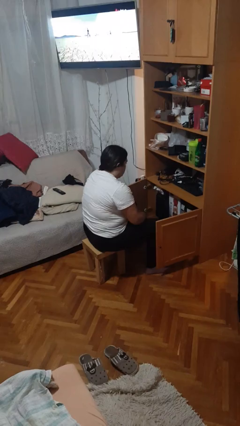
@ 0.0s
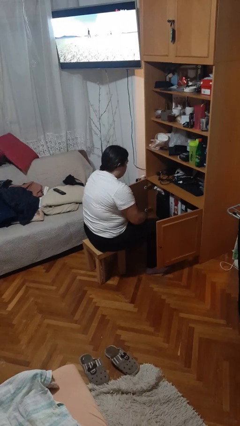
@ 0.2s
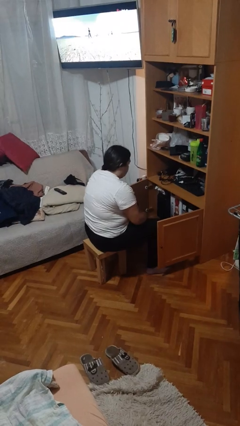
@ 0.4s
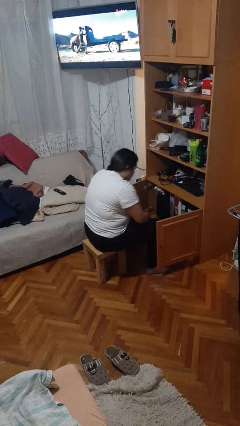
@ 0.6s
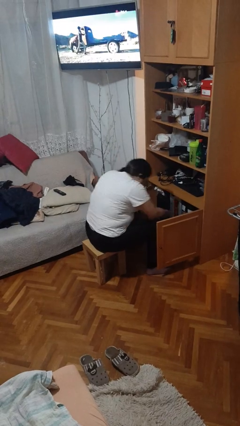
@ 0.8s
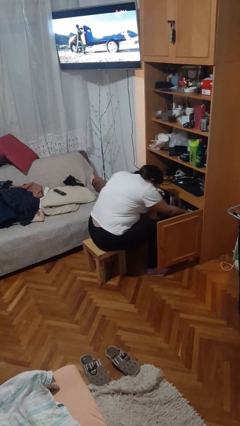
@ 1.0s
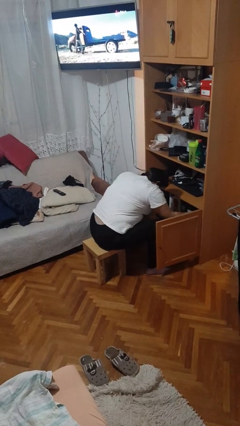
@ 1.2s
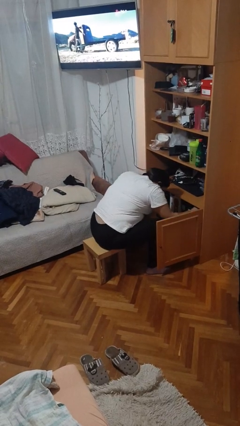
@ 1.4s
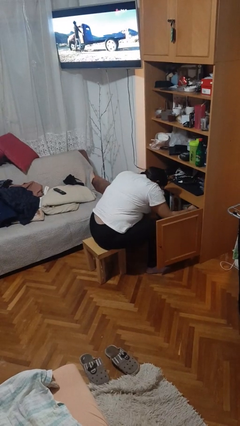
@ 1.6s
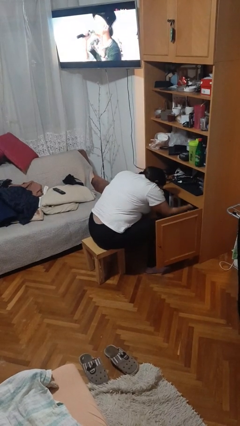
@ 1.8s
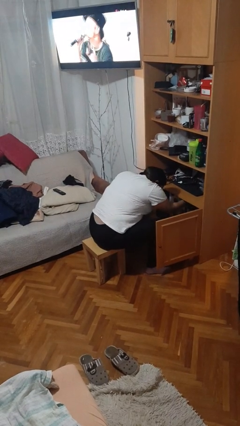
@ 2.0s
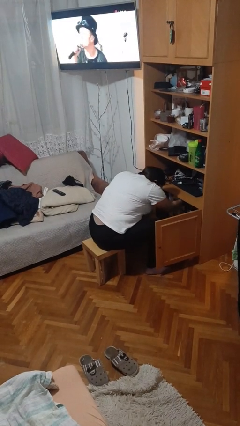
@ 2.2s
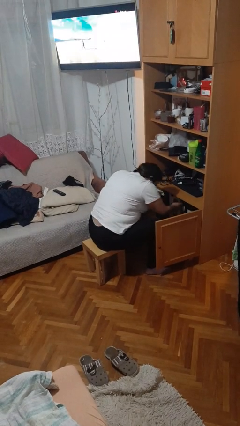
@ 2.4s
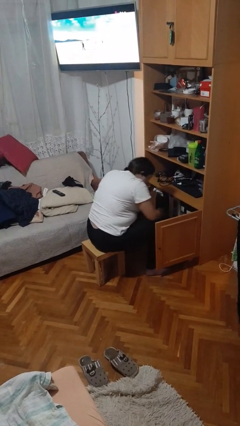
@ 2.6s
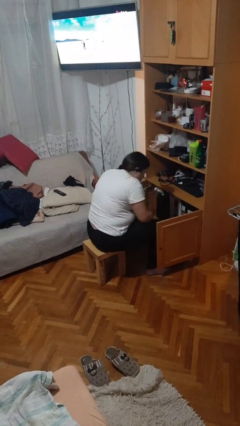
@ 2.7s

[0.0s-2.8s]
person searches in cabinet

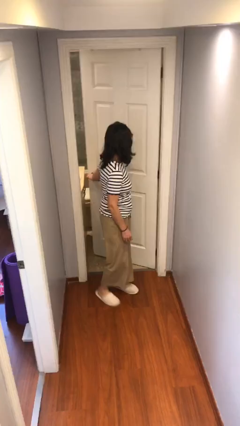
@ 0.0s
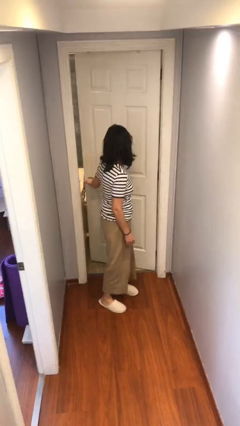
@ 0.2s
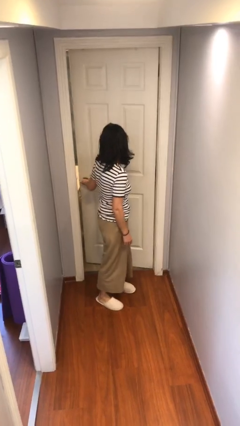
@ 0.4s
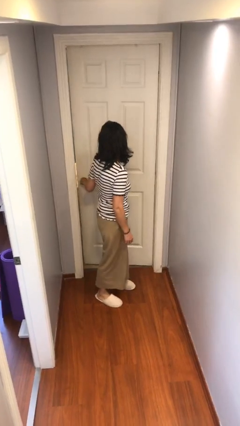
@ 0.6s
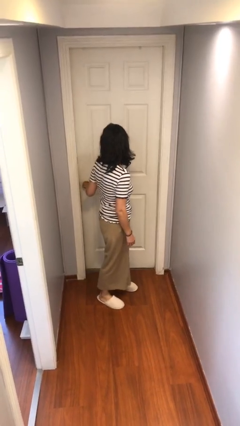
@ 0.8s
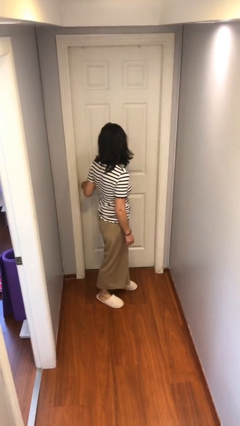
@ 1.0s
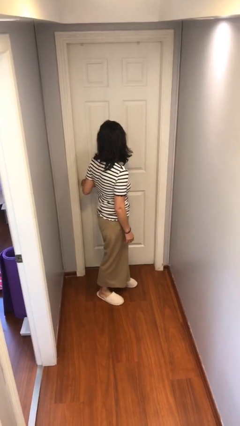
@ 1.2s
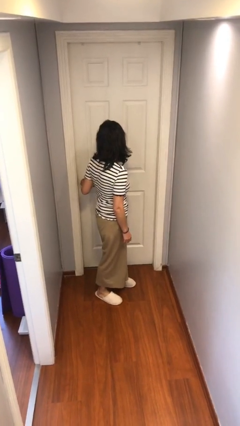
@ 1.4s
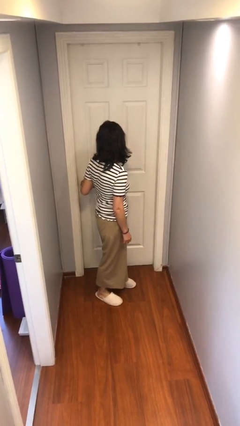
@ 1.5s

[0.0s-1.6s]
person closes facility door

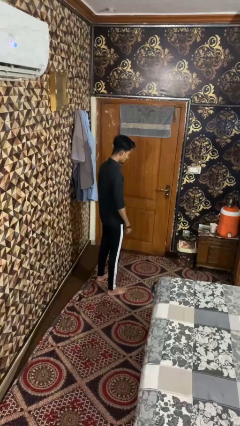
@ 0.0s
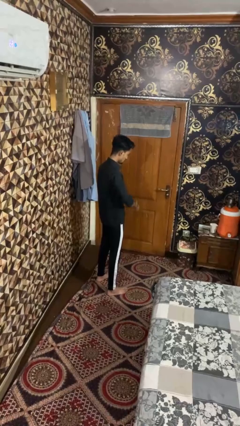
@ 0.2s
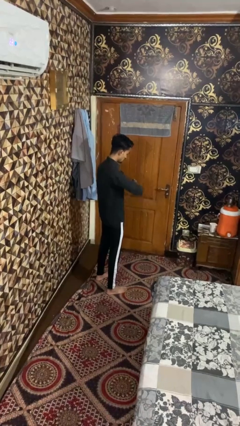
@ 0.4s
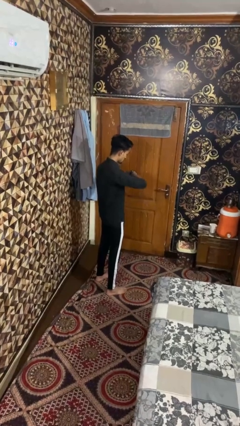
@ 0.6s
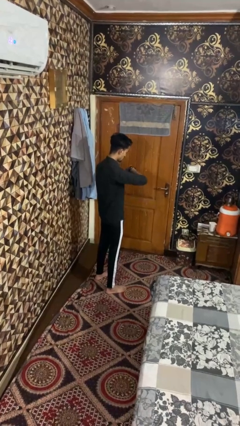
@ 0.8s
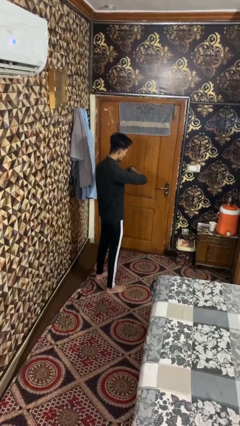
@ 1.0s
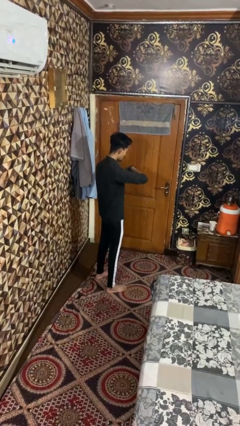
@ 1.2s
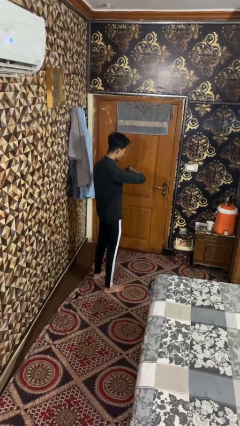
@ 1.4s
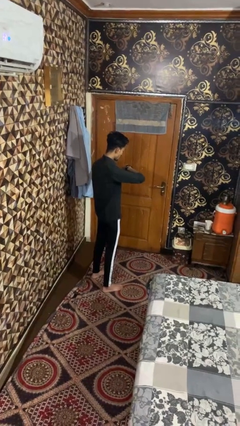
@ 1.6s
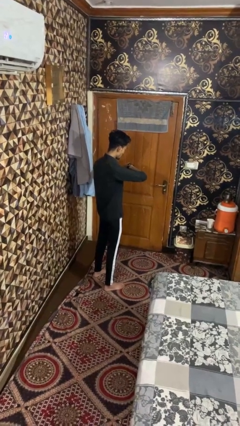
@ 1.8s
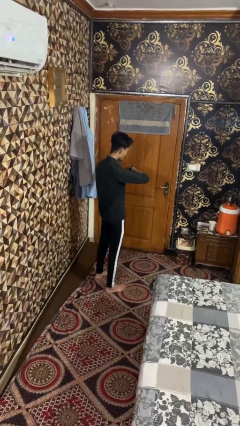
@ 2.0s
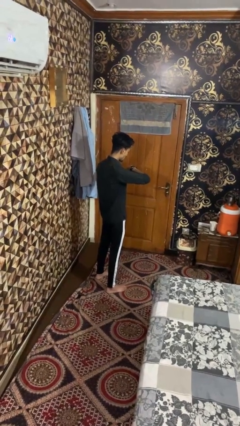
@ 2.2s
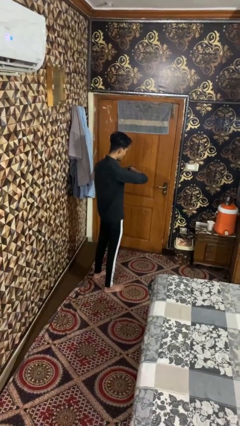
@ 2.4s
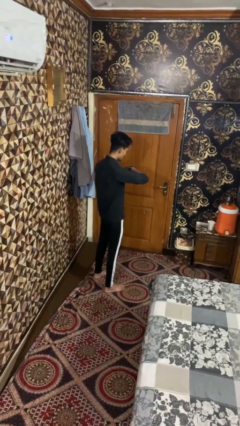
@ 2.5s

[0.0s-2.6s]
person looks at wristwatch

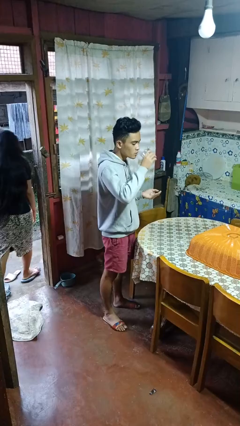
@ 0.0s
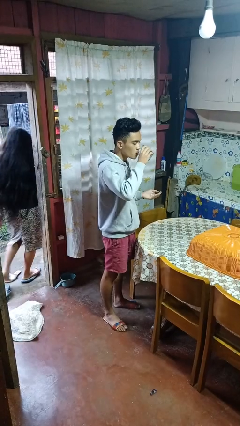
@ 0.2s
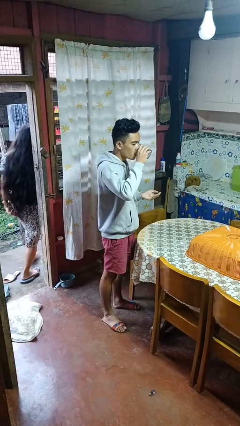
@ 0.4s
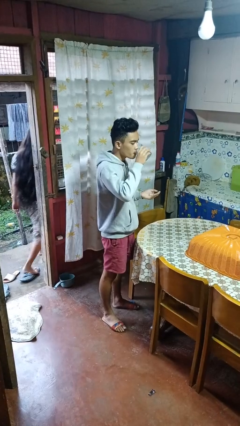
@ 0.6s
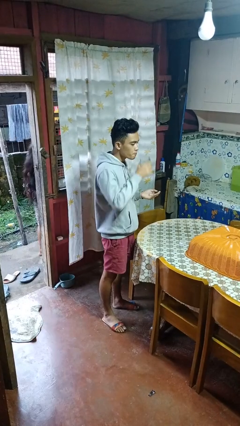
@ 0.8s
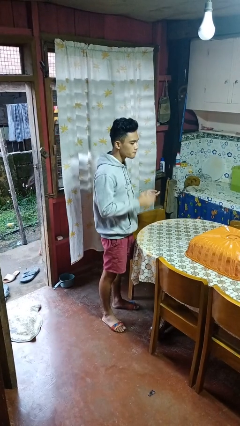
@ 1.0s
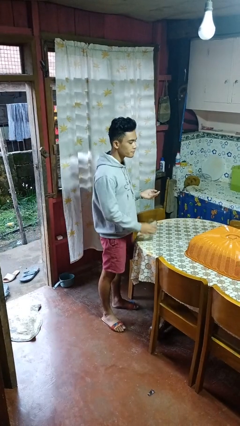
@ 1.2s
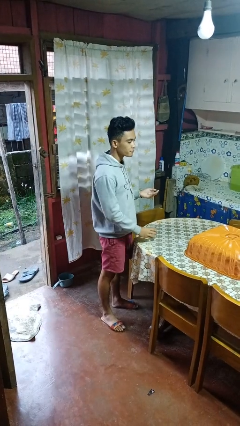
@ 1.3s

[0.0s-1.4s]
person drinks from cup

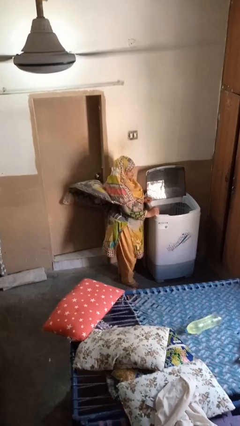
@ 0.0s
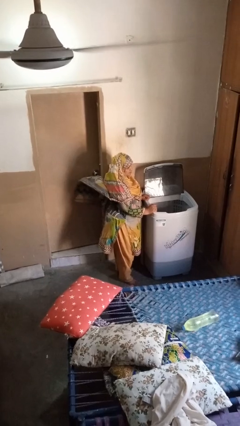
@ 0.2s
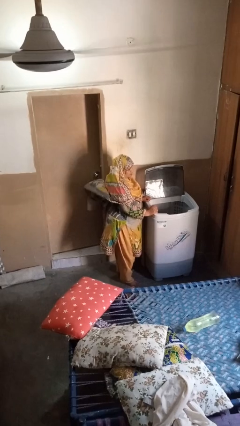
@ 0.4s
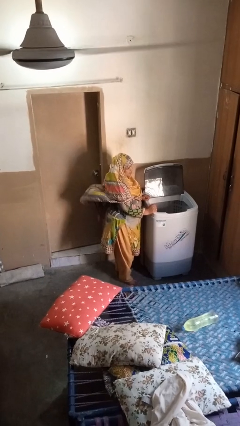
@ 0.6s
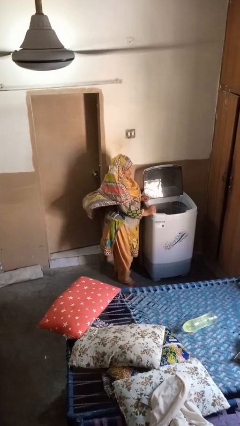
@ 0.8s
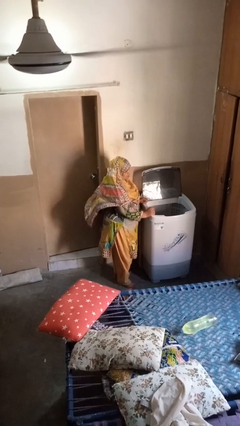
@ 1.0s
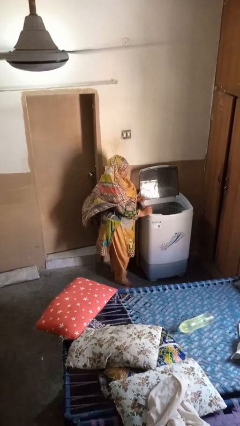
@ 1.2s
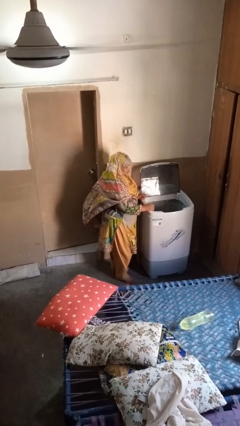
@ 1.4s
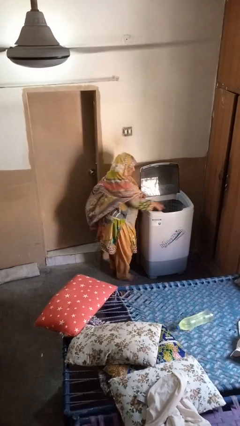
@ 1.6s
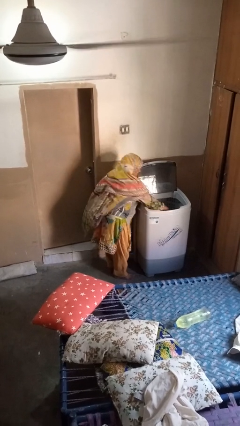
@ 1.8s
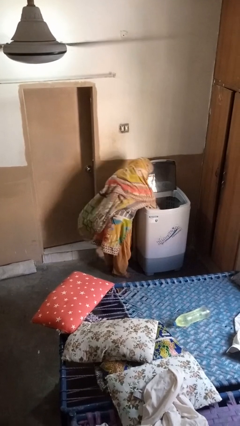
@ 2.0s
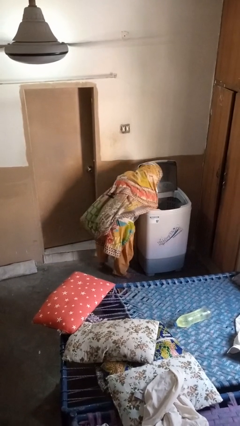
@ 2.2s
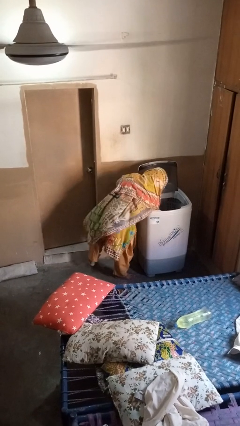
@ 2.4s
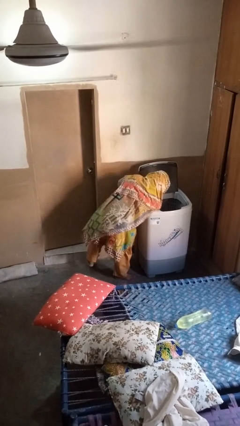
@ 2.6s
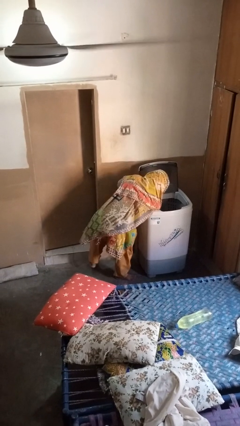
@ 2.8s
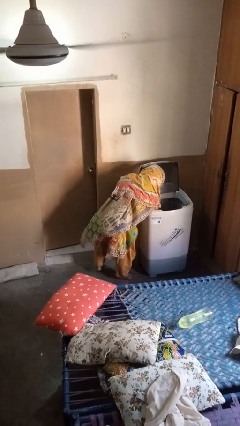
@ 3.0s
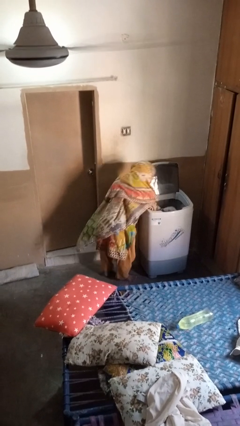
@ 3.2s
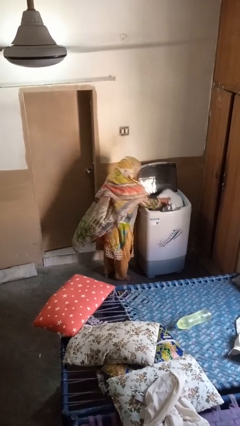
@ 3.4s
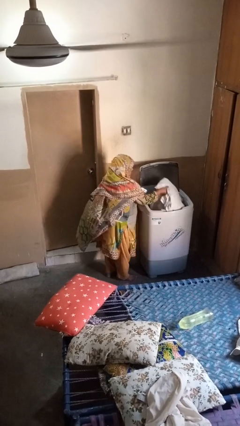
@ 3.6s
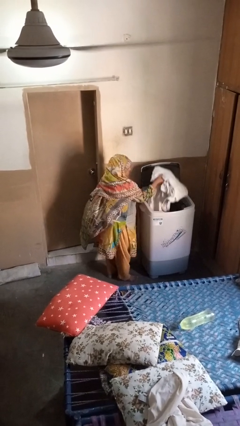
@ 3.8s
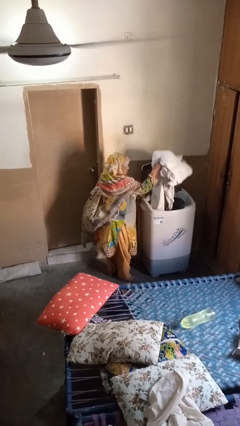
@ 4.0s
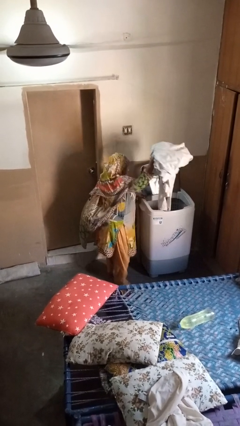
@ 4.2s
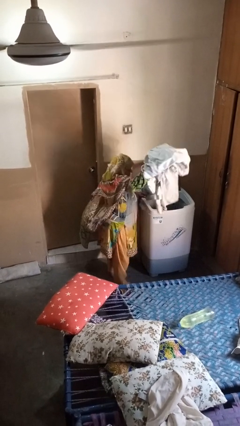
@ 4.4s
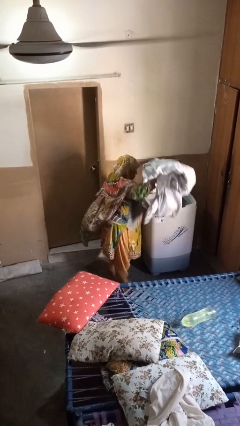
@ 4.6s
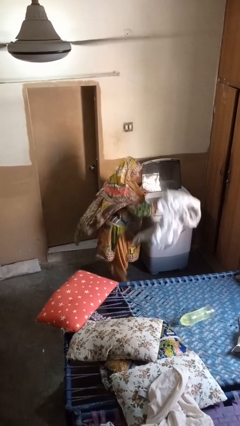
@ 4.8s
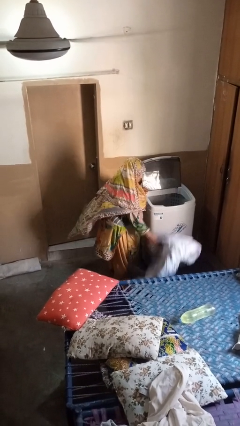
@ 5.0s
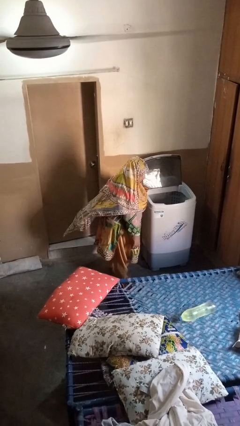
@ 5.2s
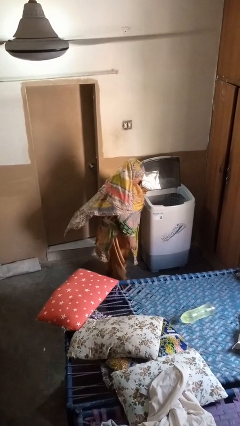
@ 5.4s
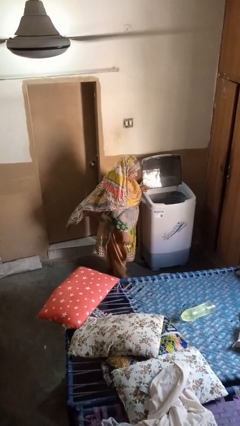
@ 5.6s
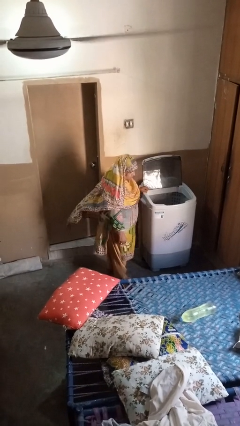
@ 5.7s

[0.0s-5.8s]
person unloads clotheswasher

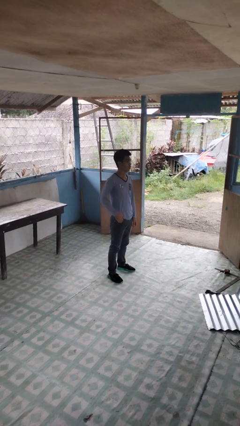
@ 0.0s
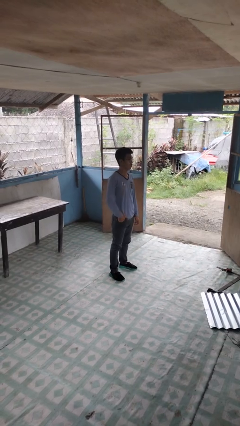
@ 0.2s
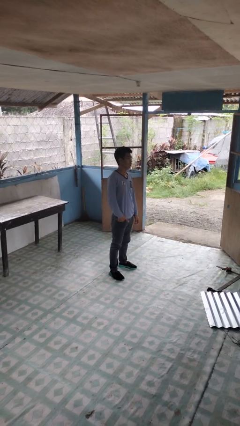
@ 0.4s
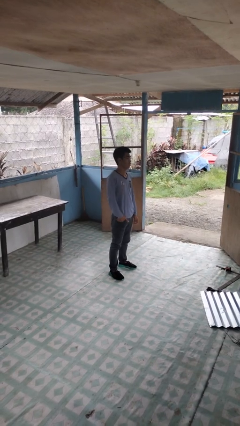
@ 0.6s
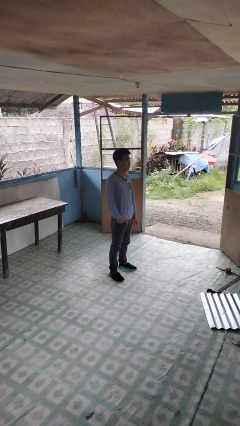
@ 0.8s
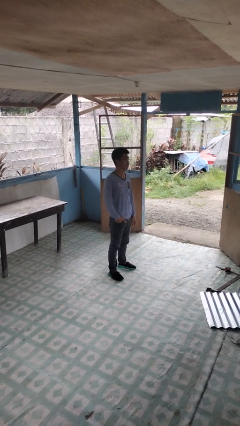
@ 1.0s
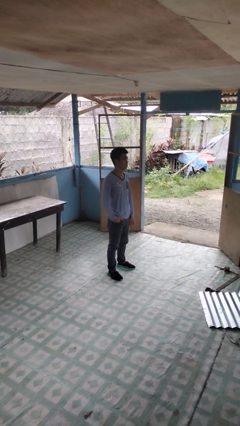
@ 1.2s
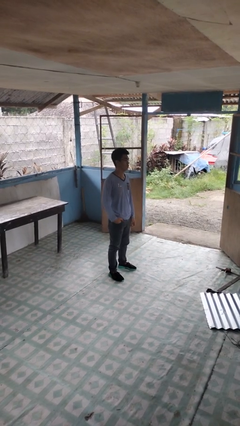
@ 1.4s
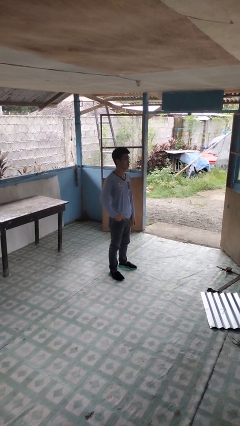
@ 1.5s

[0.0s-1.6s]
person puts hands in back pockets

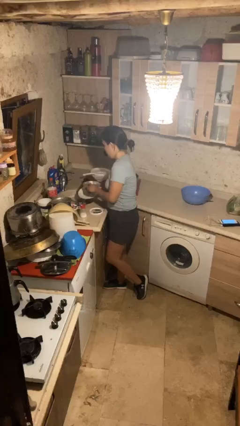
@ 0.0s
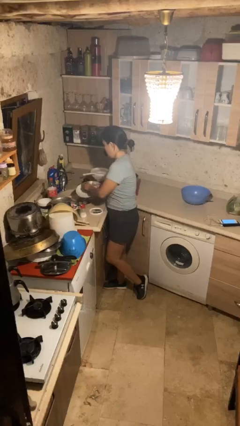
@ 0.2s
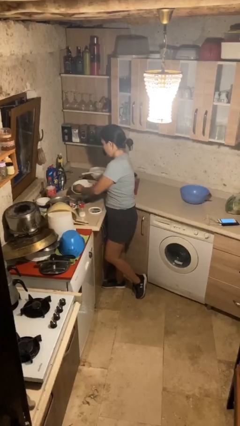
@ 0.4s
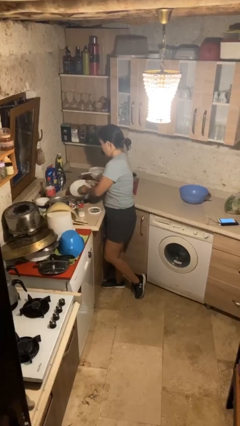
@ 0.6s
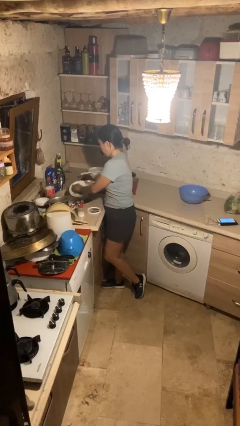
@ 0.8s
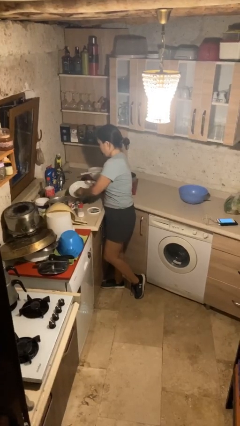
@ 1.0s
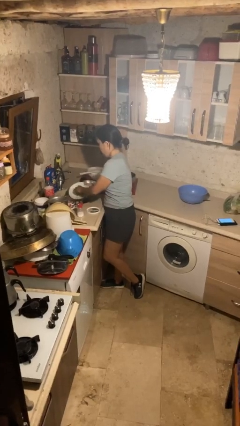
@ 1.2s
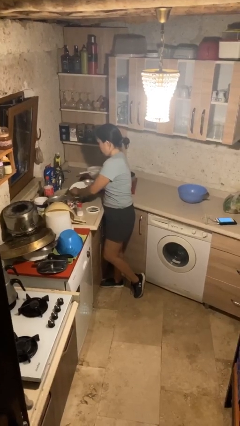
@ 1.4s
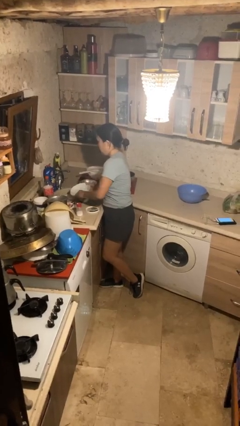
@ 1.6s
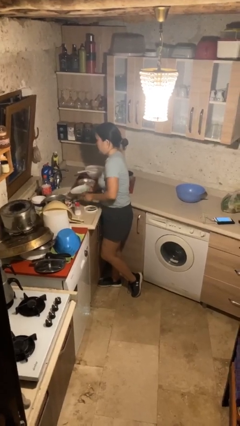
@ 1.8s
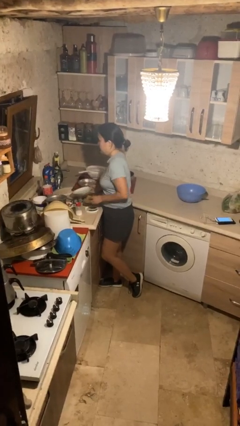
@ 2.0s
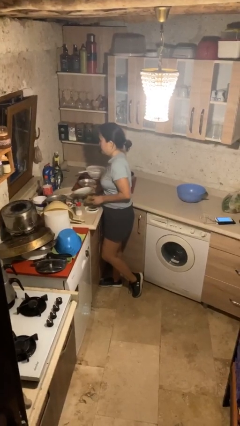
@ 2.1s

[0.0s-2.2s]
person washes dish
